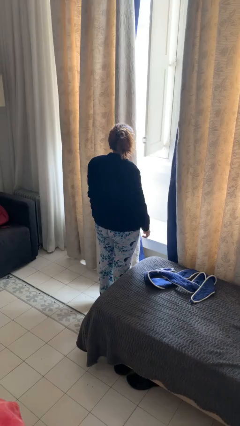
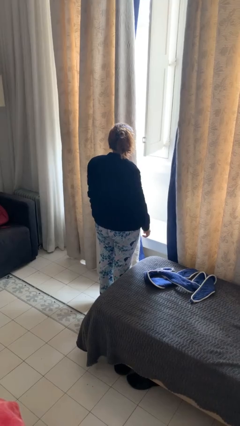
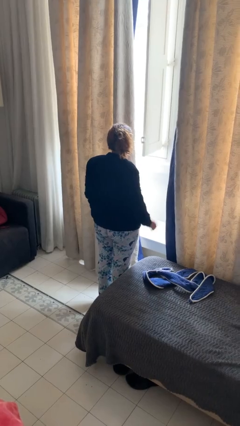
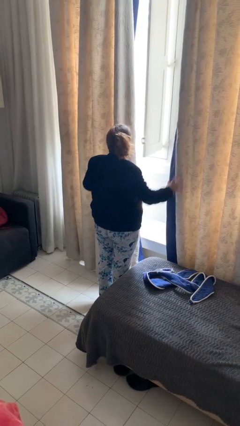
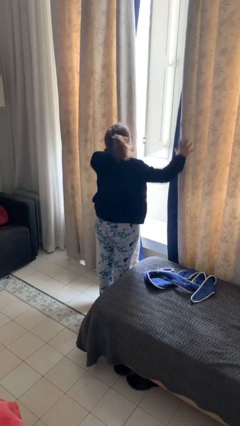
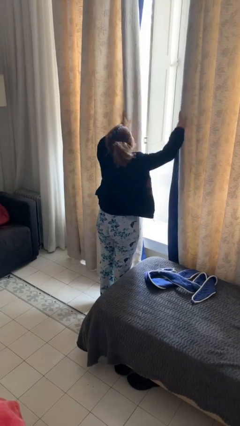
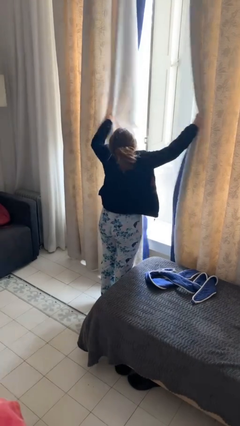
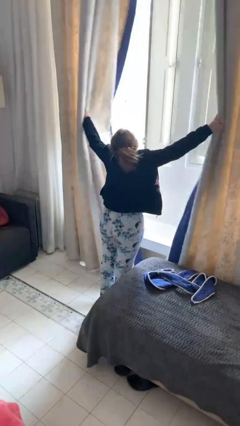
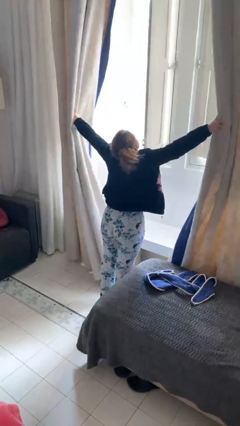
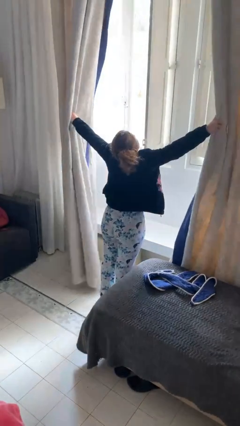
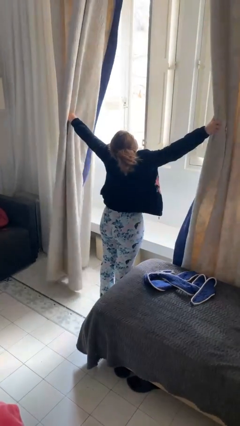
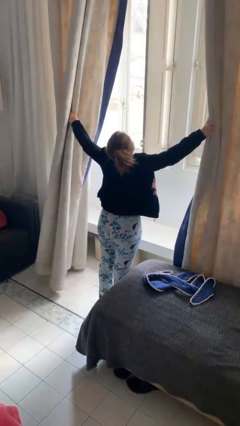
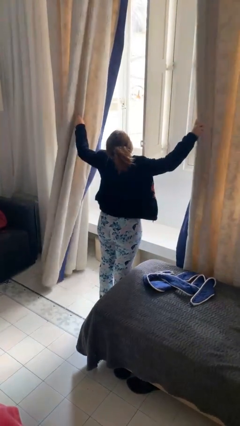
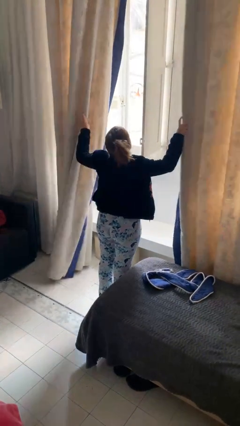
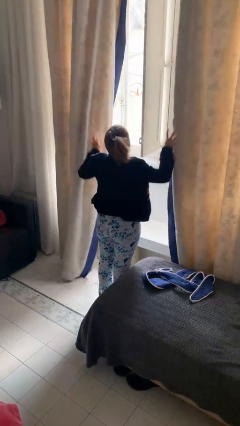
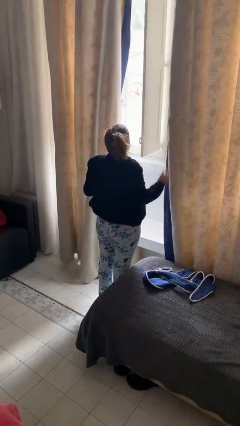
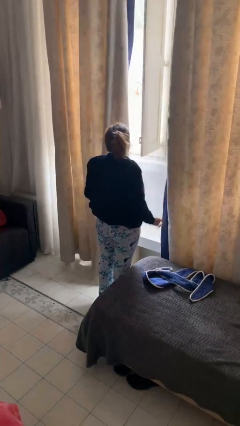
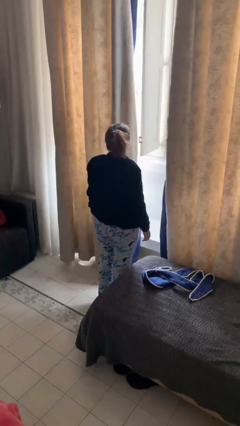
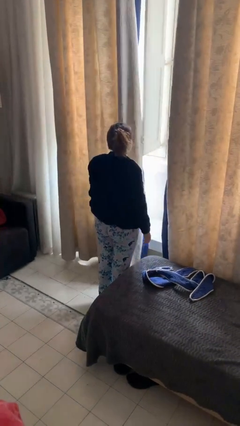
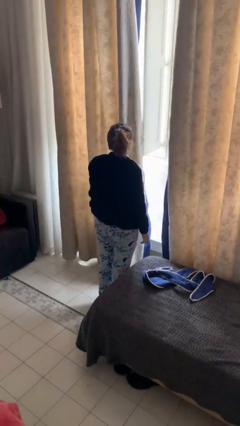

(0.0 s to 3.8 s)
person opens curtains

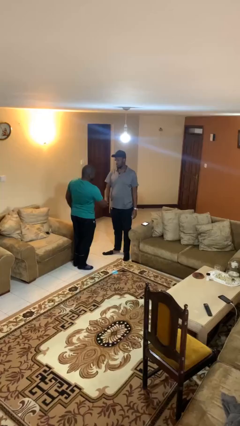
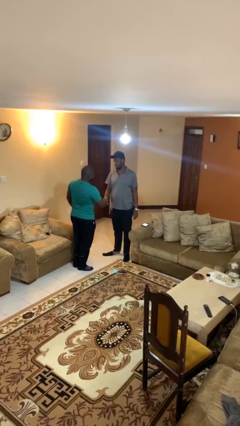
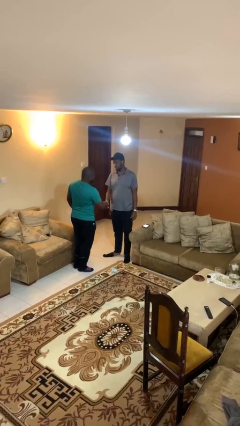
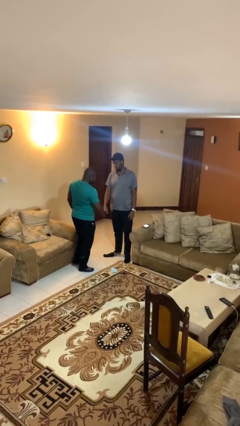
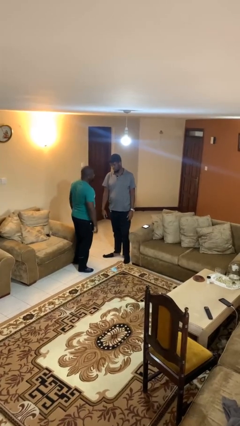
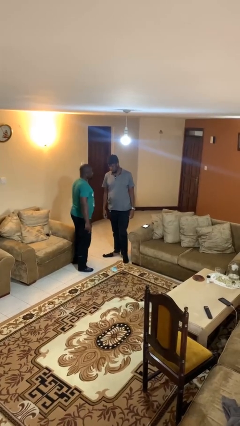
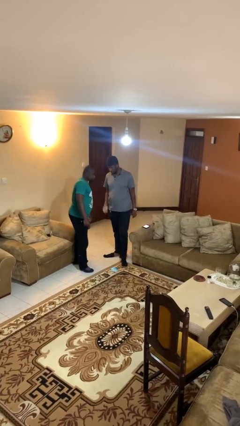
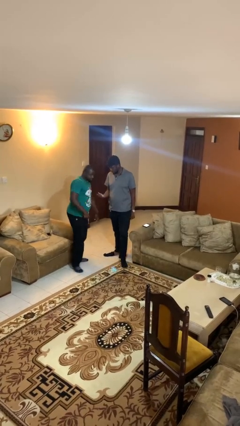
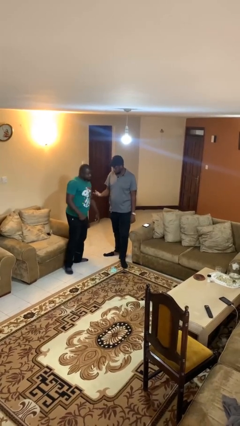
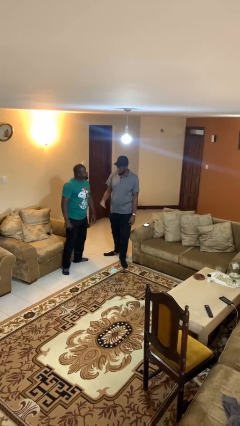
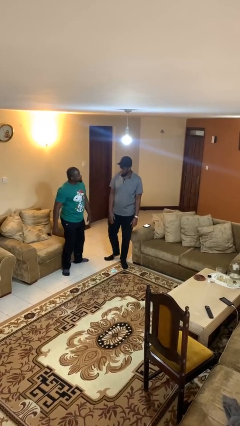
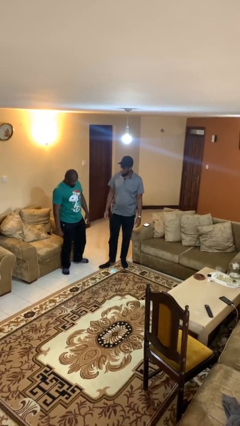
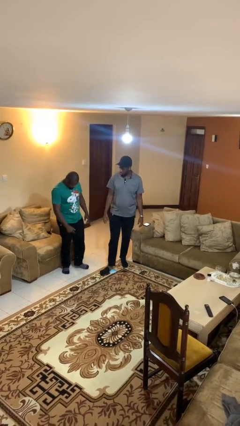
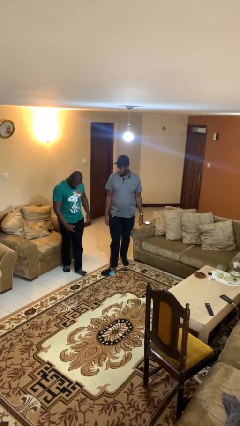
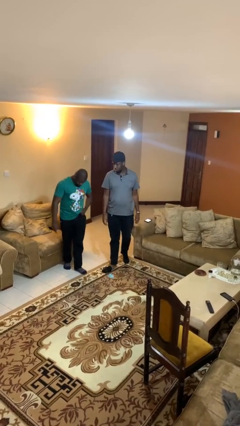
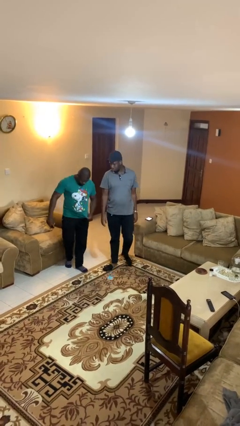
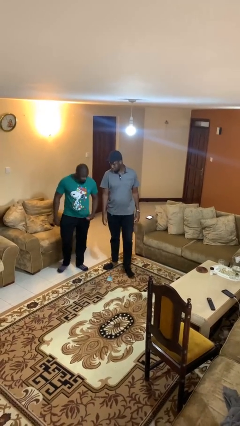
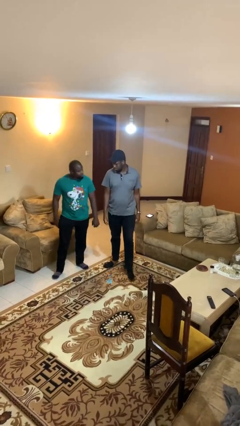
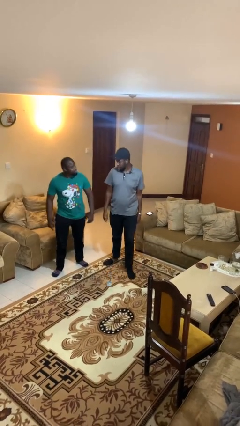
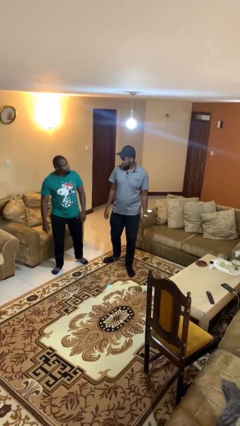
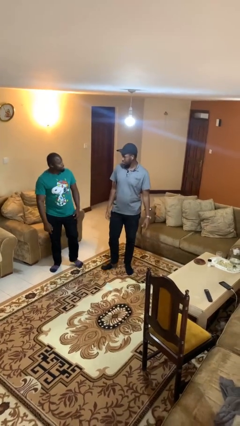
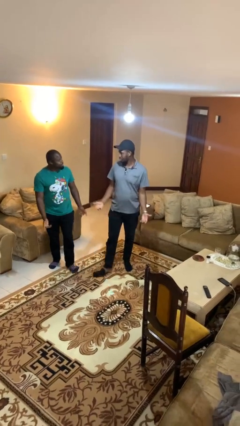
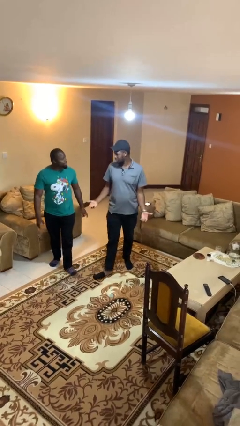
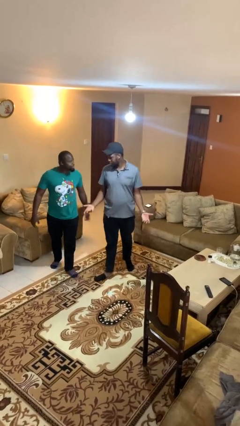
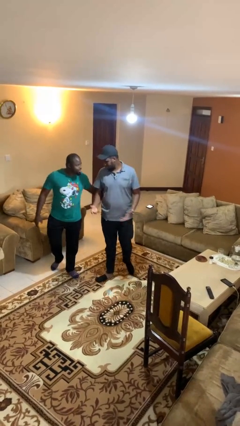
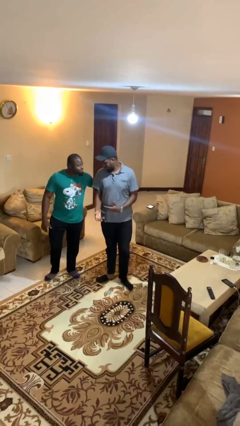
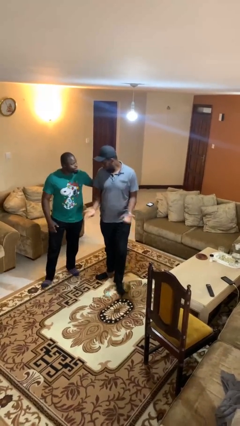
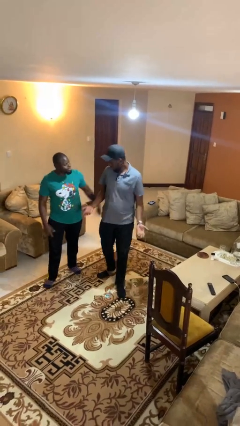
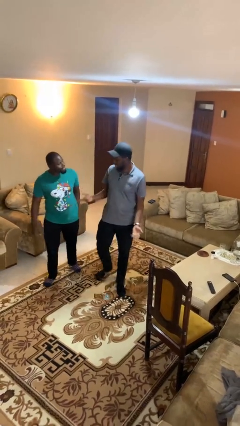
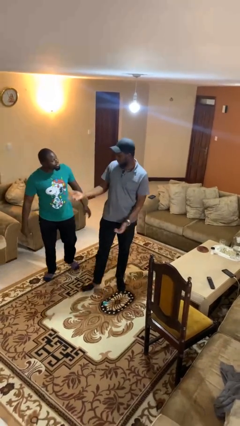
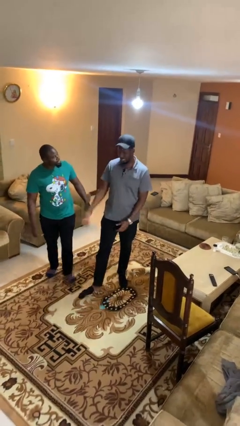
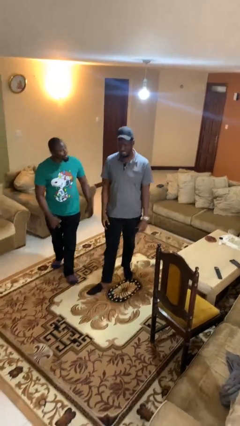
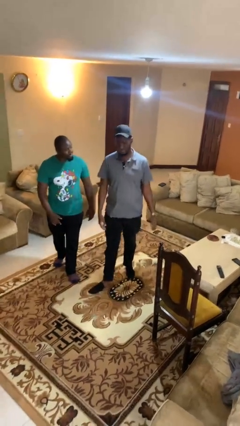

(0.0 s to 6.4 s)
person talks to person

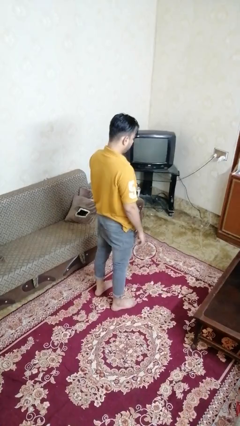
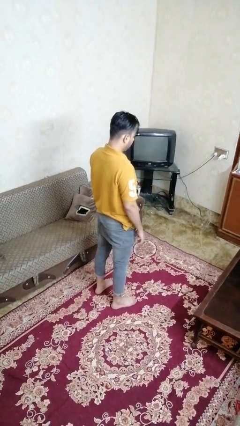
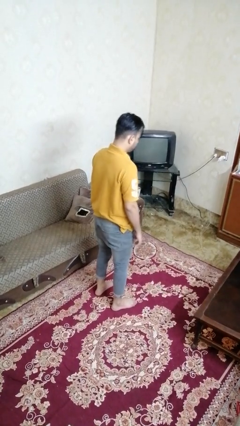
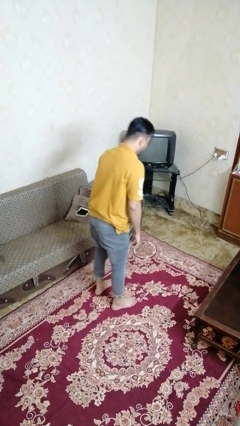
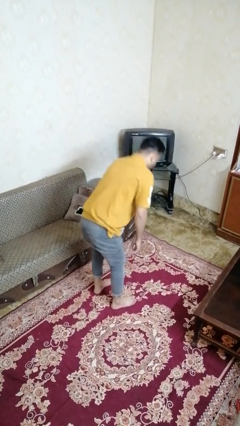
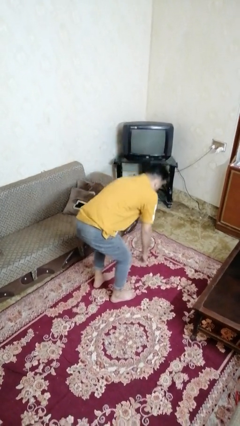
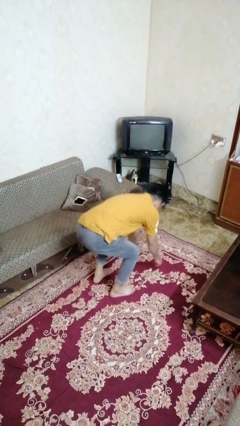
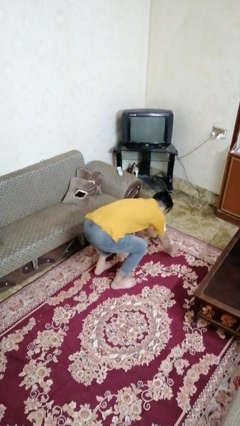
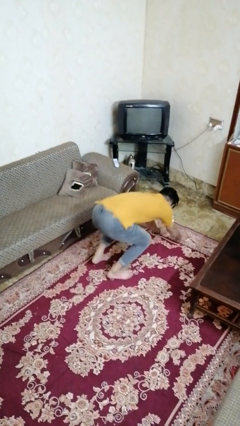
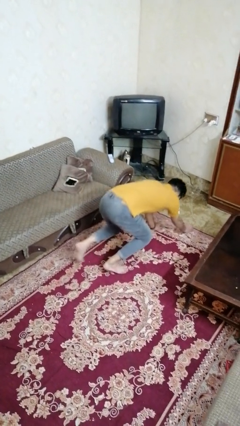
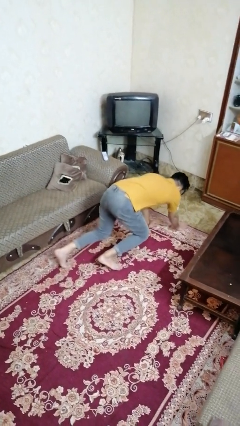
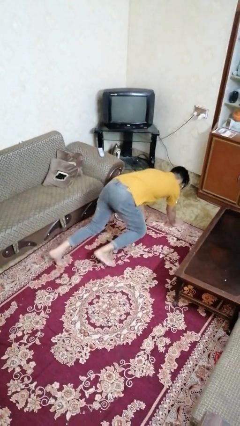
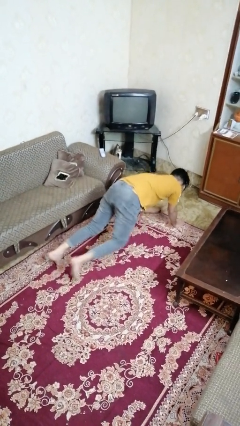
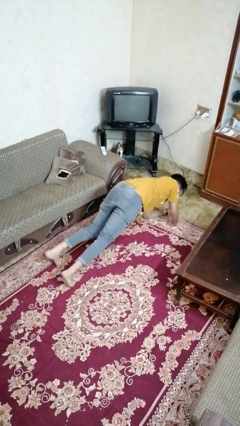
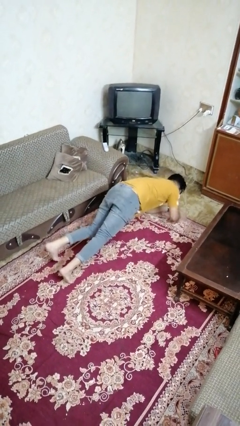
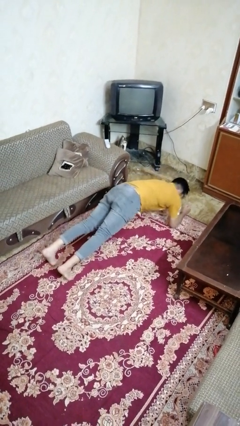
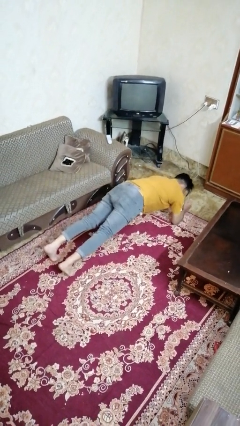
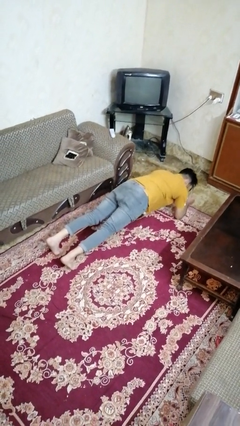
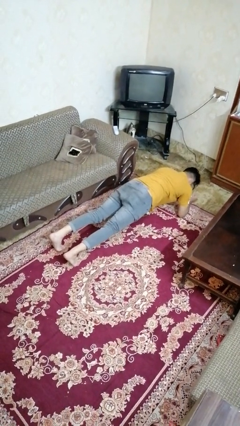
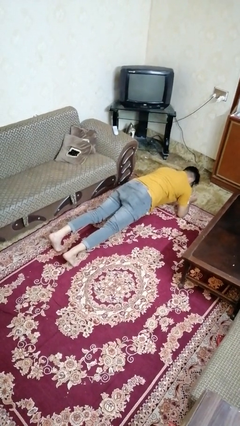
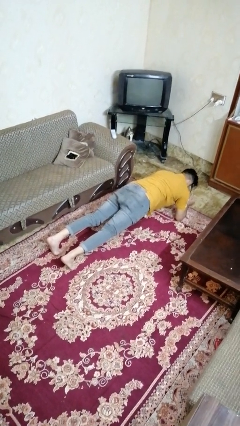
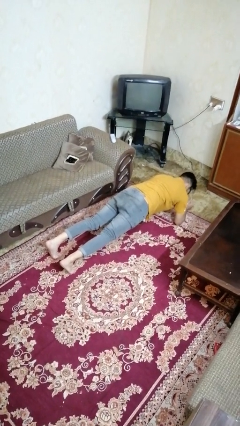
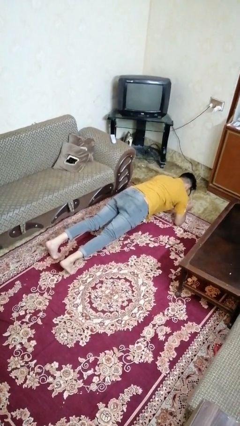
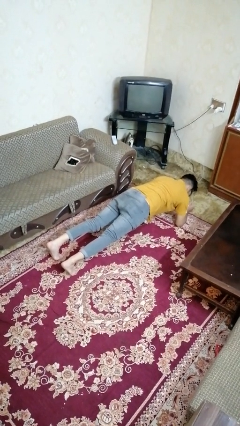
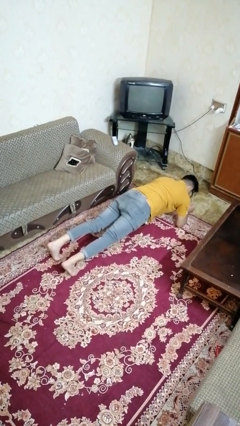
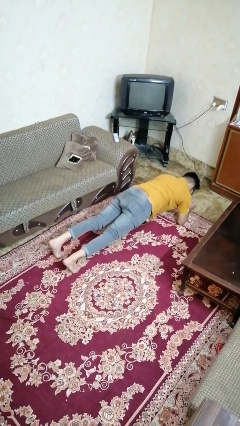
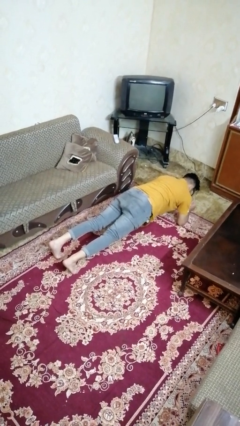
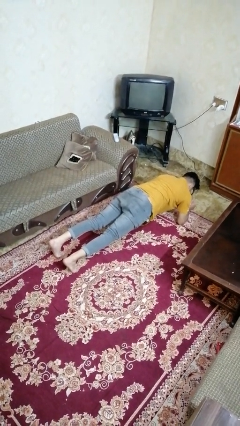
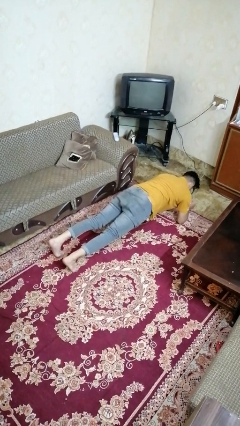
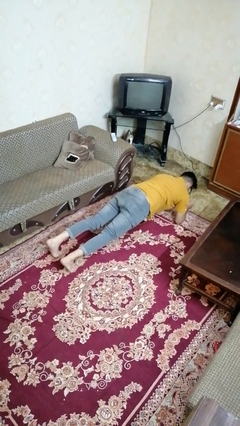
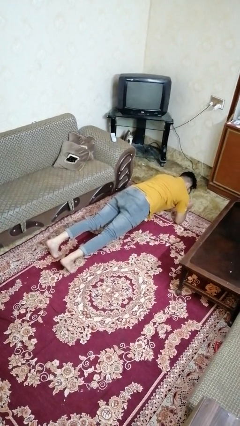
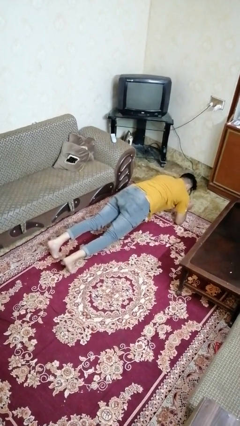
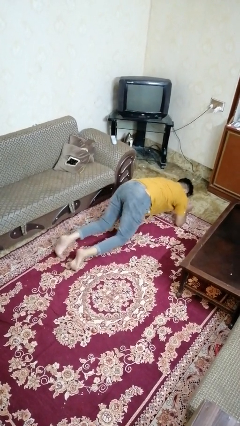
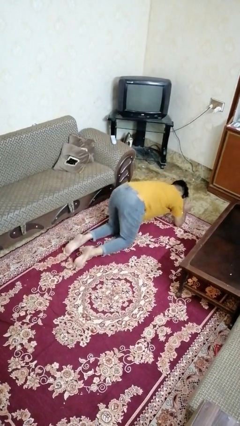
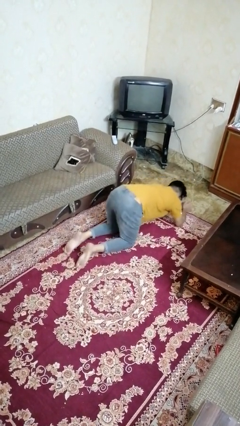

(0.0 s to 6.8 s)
person exercises with plank

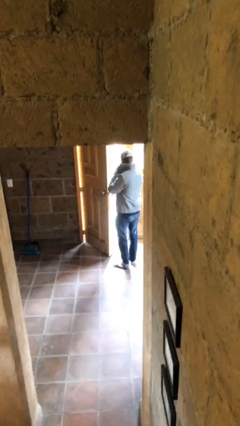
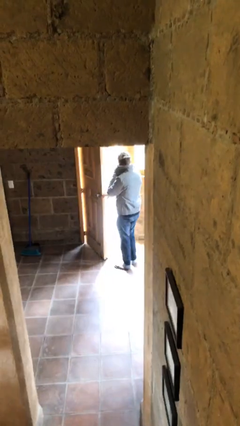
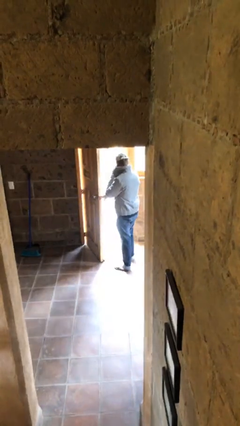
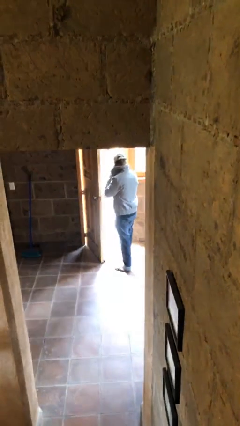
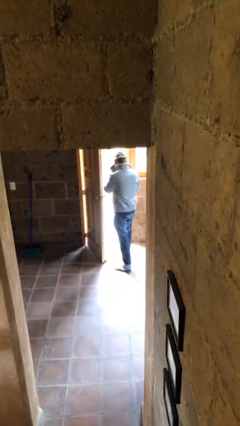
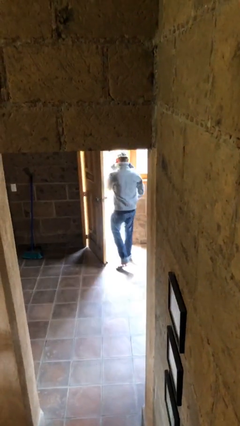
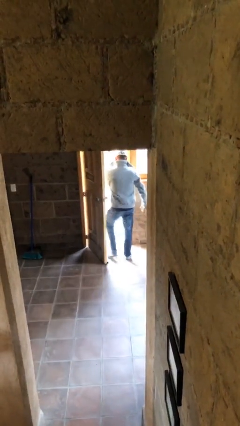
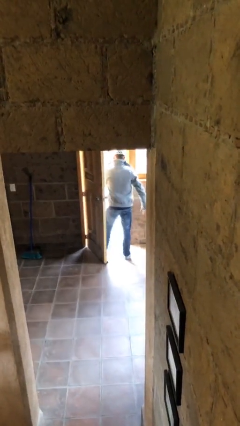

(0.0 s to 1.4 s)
person exits scene through structure
